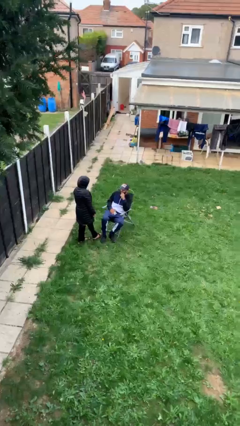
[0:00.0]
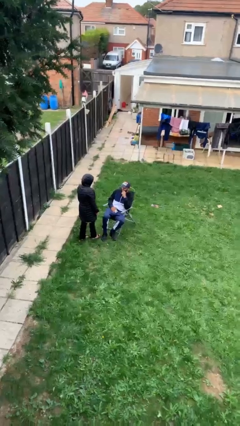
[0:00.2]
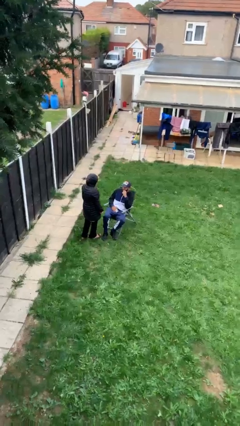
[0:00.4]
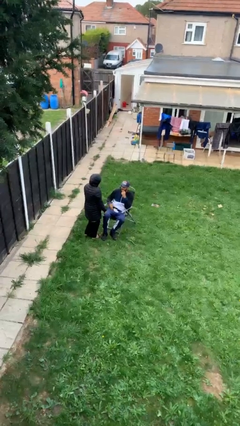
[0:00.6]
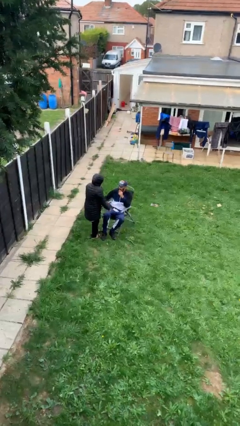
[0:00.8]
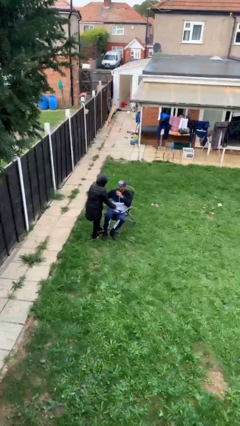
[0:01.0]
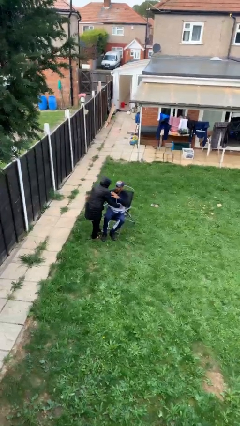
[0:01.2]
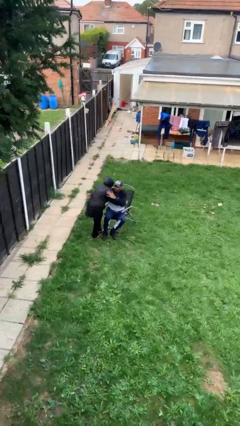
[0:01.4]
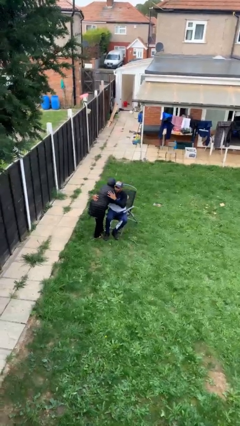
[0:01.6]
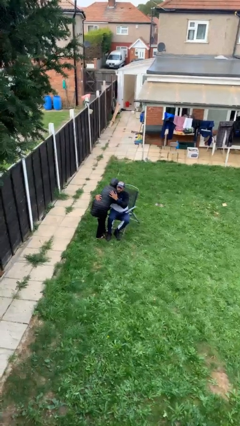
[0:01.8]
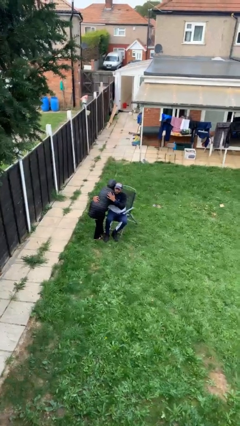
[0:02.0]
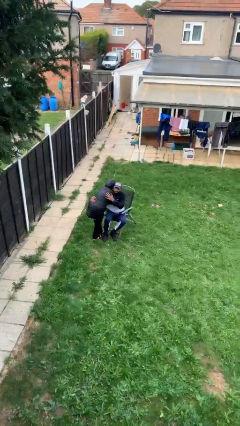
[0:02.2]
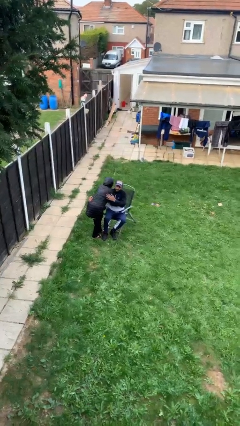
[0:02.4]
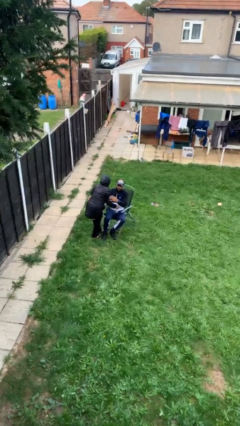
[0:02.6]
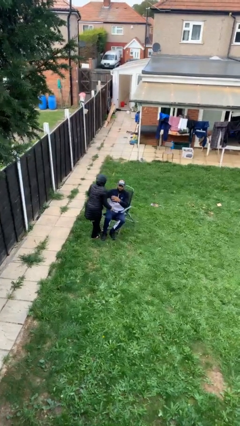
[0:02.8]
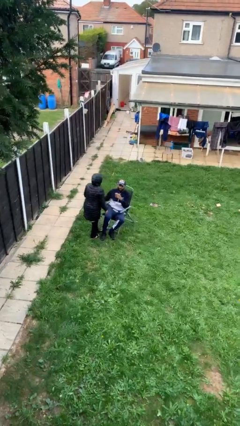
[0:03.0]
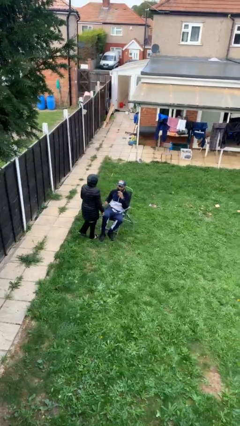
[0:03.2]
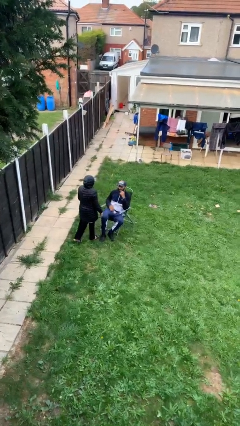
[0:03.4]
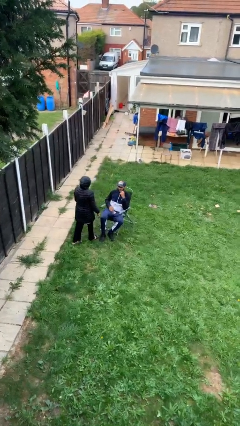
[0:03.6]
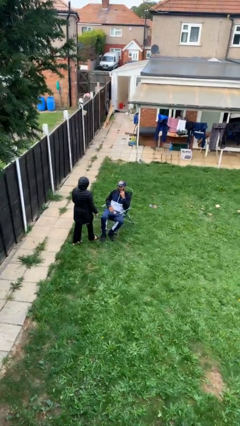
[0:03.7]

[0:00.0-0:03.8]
person embraces person

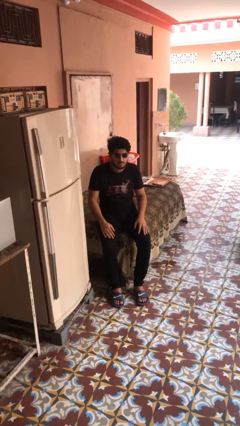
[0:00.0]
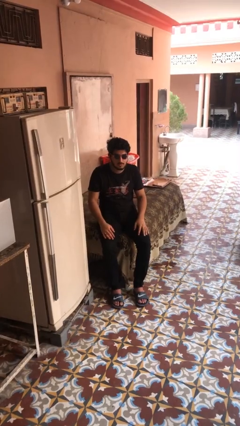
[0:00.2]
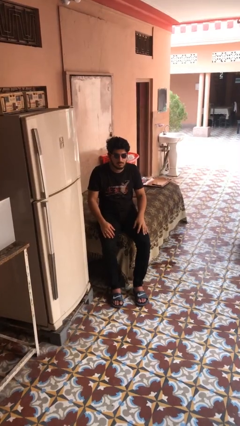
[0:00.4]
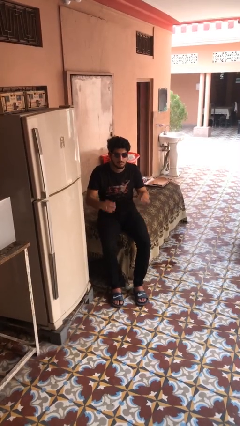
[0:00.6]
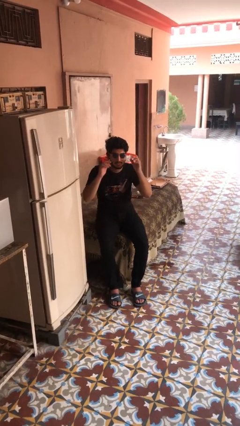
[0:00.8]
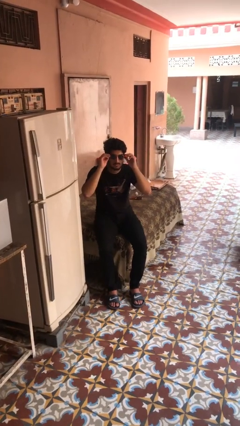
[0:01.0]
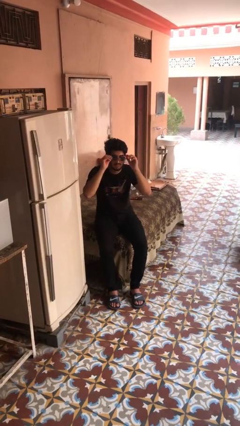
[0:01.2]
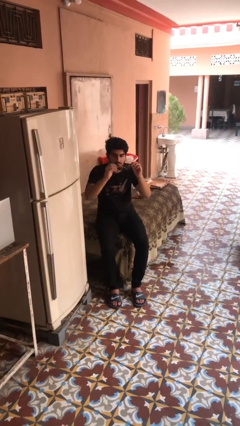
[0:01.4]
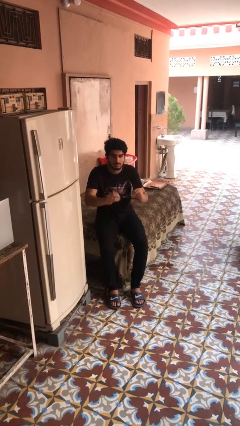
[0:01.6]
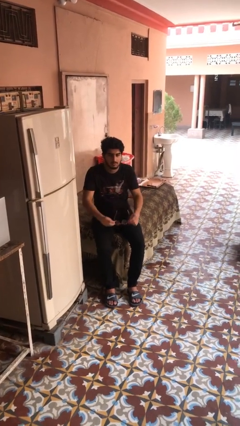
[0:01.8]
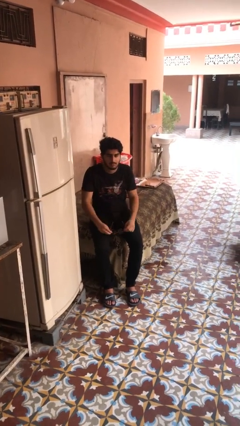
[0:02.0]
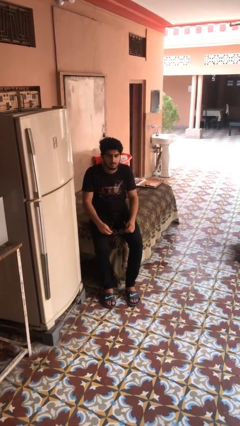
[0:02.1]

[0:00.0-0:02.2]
person takes off sunglasses

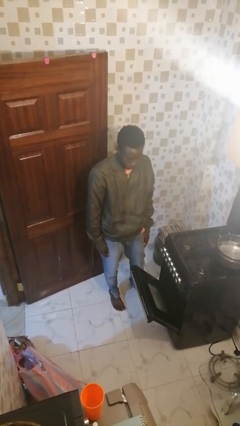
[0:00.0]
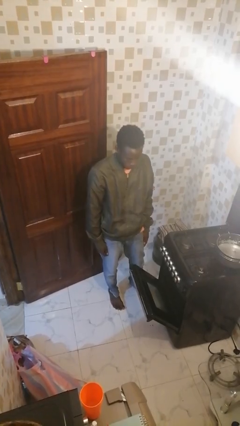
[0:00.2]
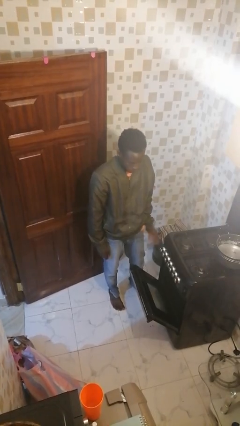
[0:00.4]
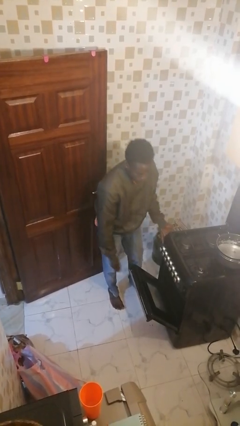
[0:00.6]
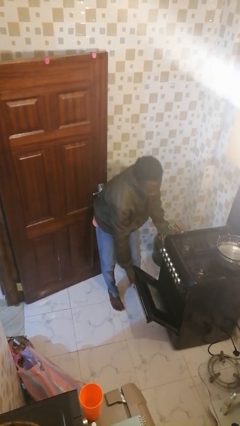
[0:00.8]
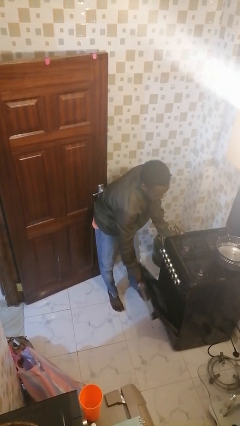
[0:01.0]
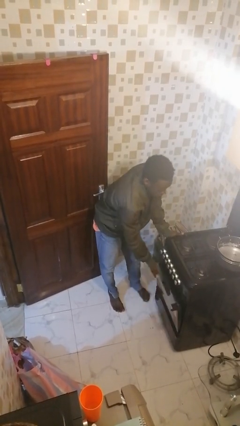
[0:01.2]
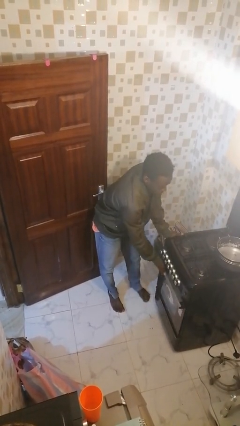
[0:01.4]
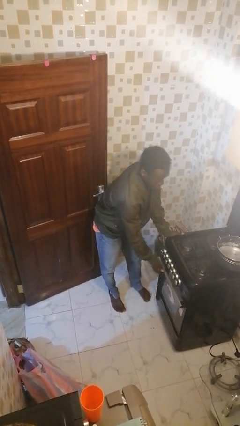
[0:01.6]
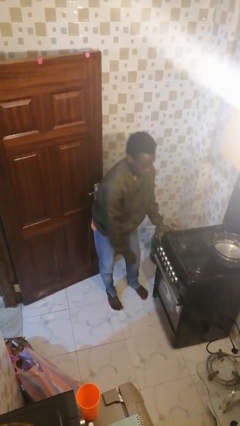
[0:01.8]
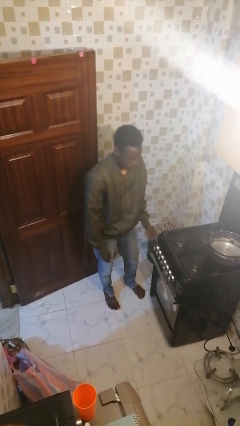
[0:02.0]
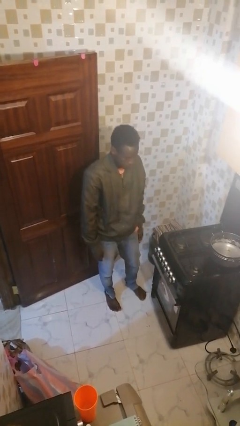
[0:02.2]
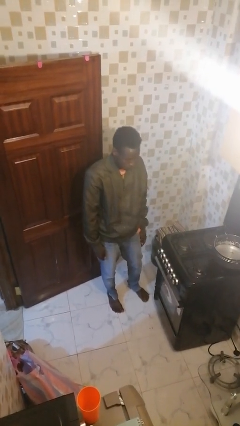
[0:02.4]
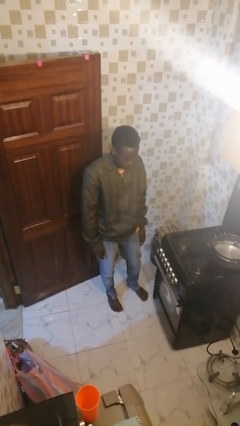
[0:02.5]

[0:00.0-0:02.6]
person closes oven door

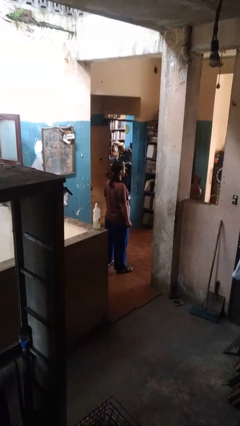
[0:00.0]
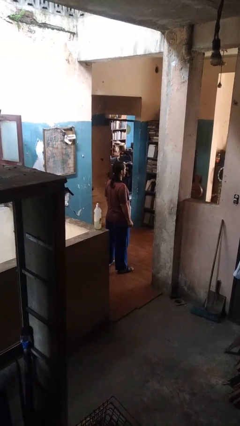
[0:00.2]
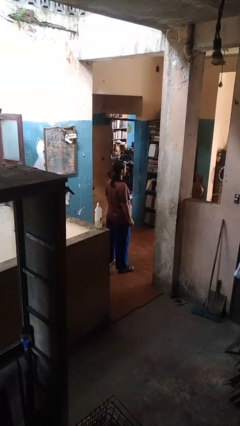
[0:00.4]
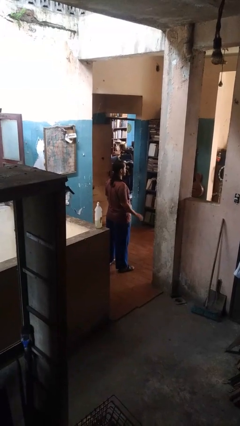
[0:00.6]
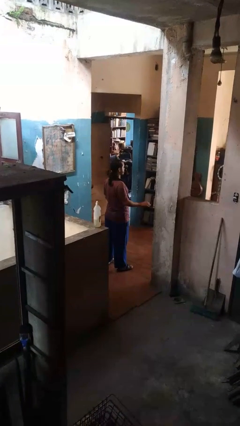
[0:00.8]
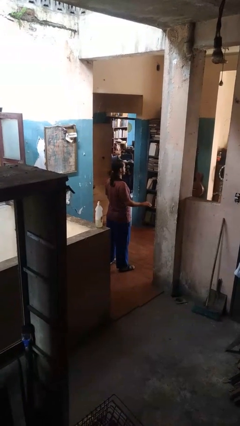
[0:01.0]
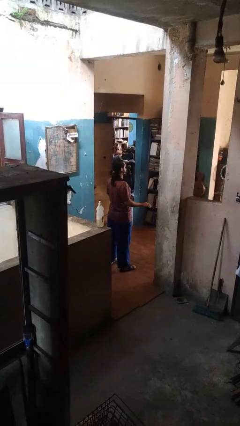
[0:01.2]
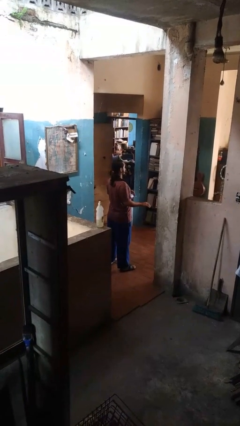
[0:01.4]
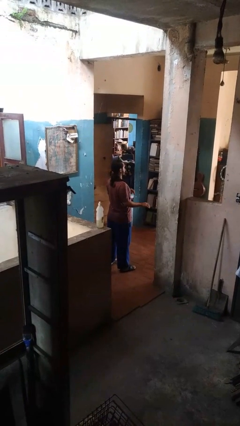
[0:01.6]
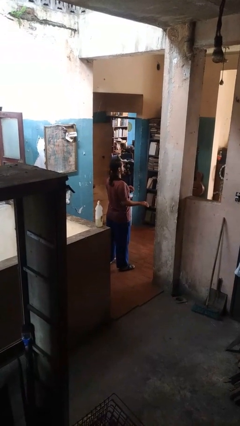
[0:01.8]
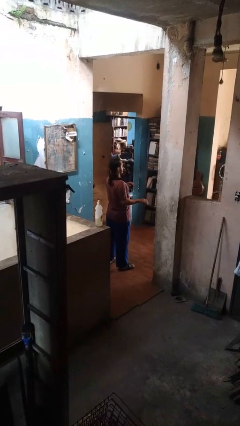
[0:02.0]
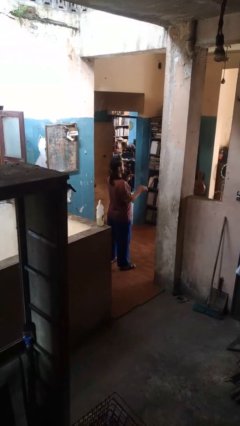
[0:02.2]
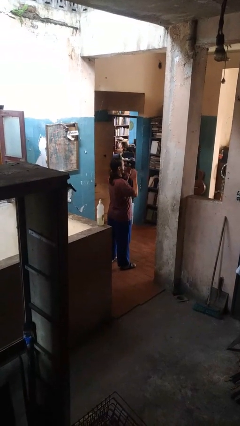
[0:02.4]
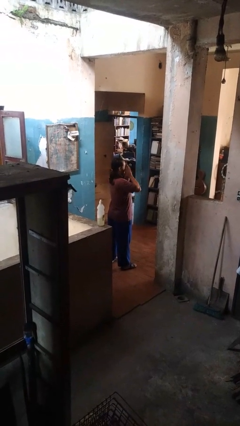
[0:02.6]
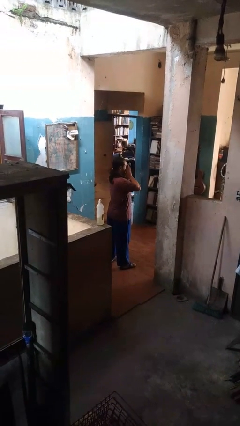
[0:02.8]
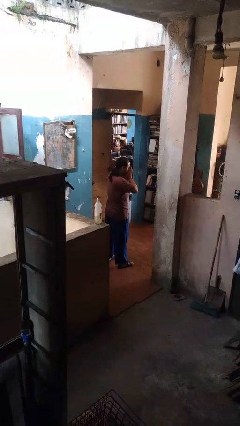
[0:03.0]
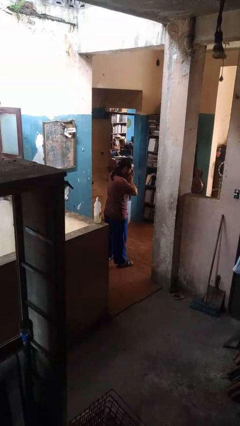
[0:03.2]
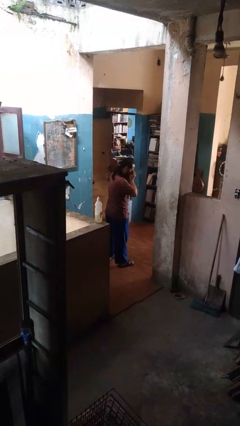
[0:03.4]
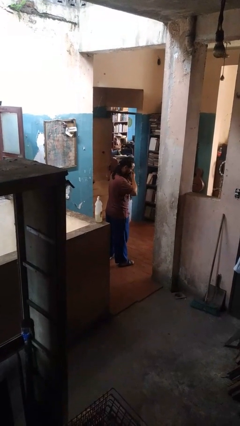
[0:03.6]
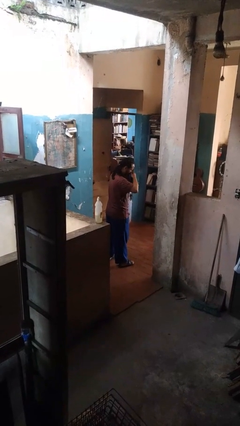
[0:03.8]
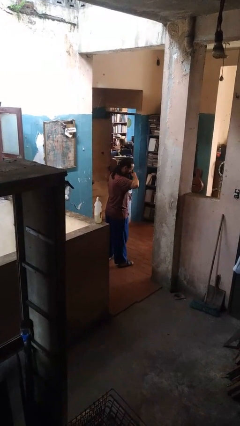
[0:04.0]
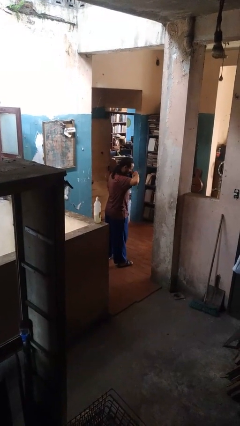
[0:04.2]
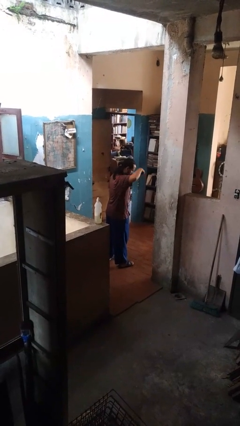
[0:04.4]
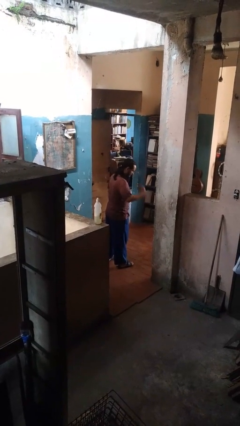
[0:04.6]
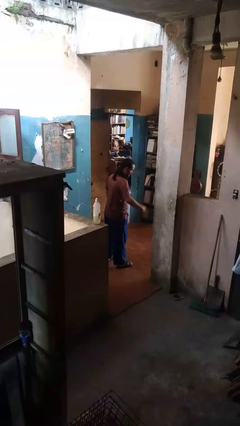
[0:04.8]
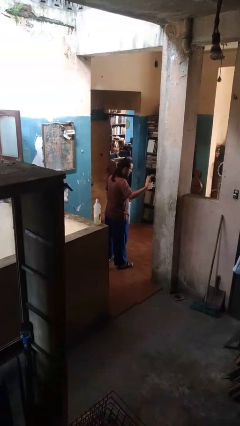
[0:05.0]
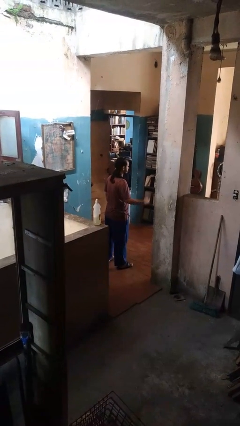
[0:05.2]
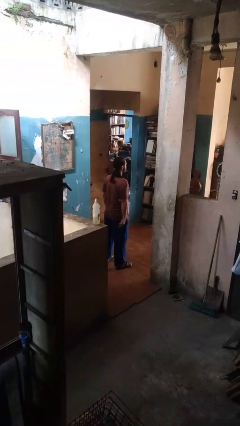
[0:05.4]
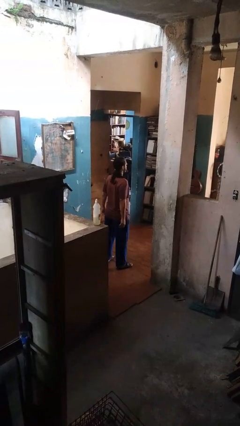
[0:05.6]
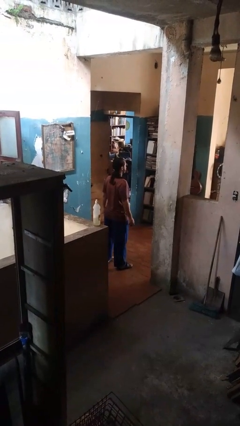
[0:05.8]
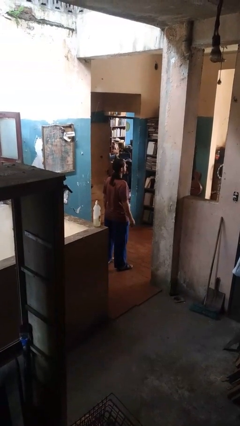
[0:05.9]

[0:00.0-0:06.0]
person sneezes into hand

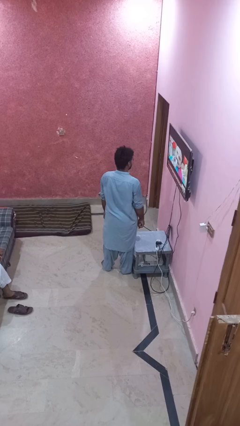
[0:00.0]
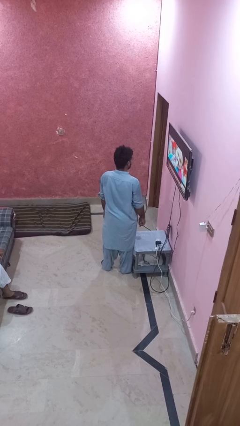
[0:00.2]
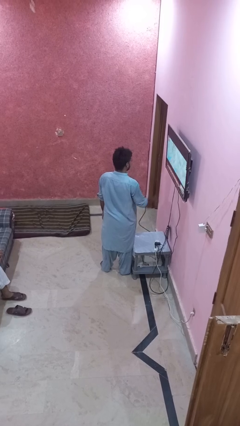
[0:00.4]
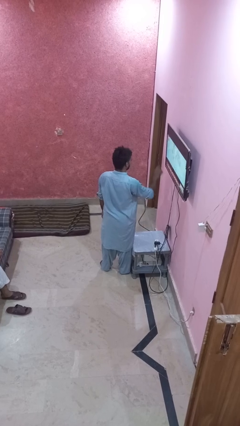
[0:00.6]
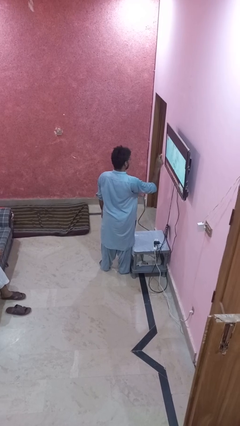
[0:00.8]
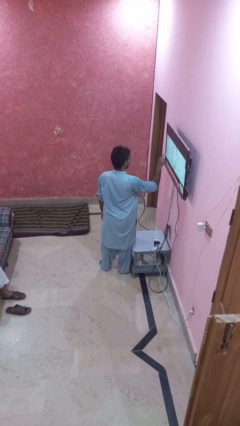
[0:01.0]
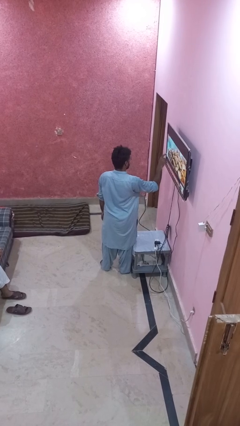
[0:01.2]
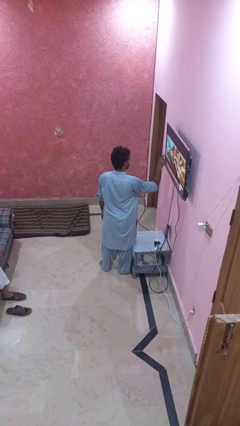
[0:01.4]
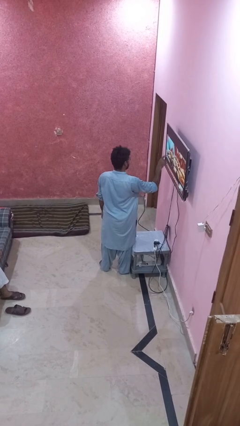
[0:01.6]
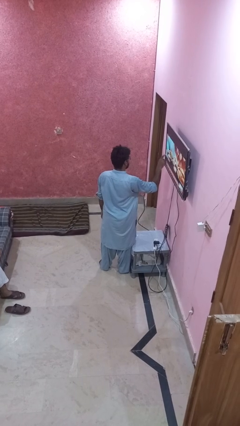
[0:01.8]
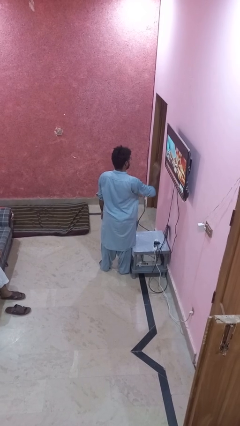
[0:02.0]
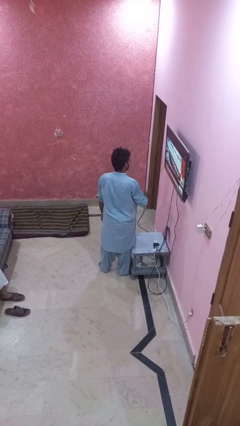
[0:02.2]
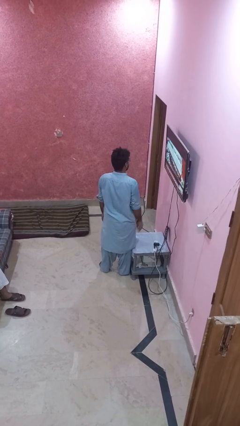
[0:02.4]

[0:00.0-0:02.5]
person taps object with finger

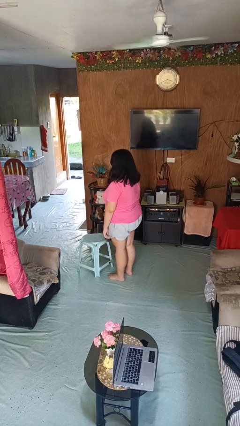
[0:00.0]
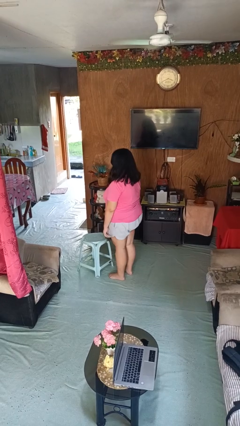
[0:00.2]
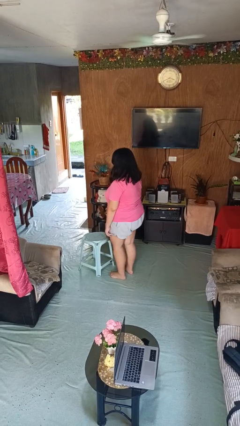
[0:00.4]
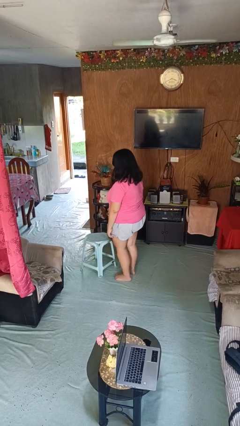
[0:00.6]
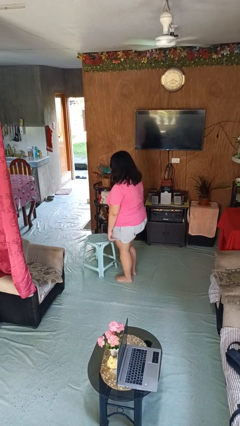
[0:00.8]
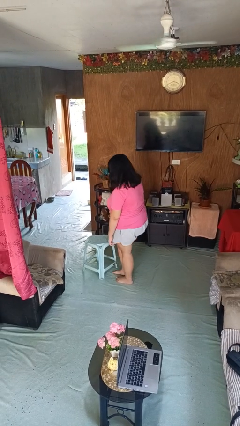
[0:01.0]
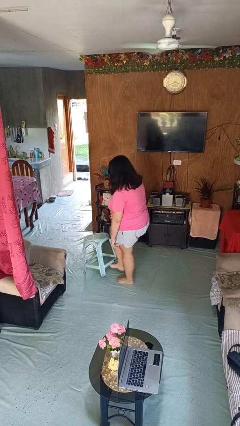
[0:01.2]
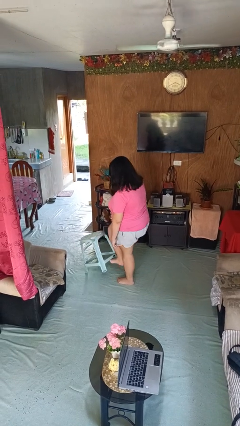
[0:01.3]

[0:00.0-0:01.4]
person knocks over furniture
